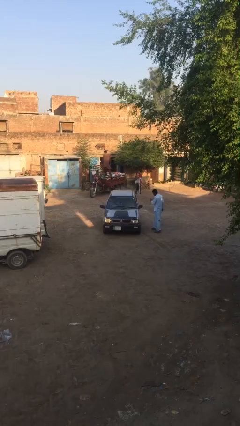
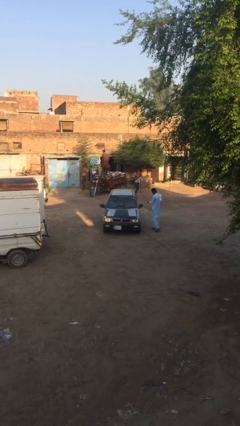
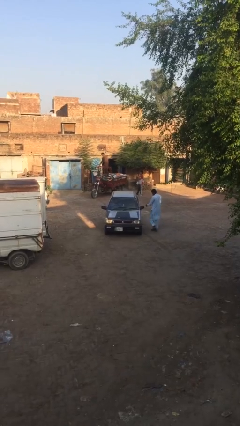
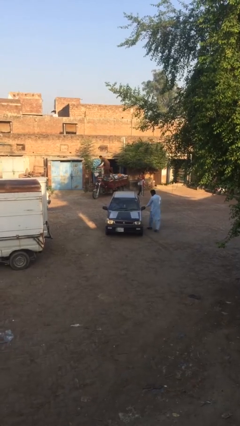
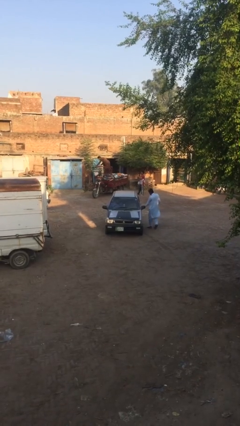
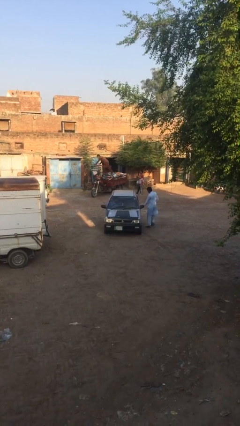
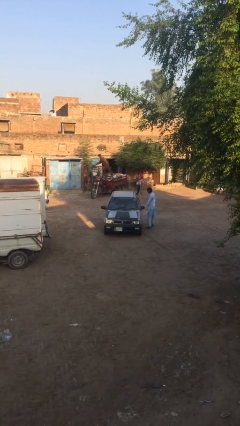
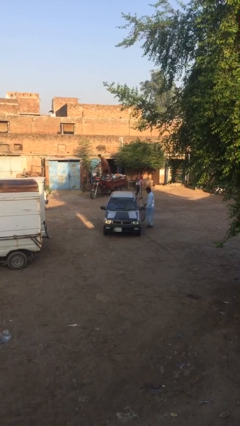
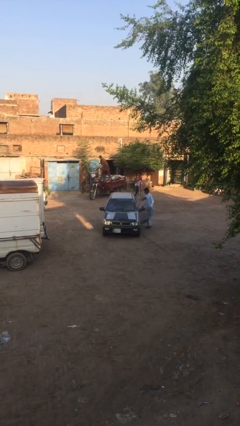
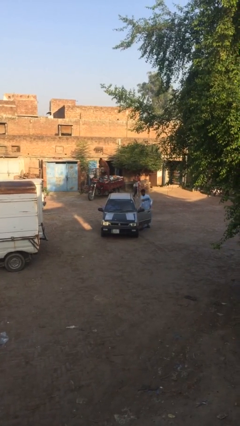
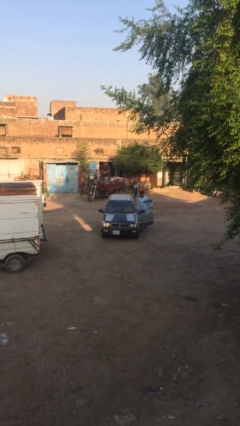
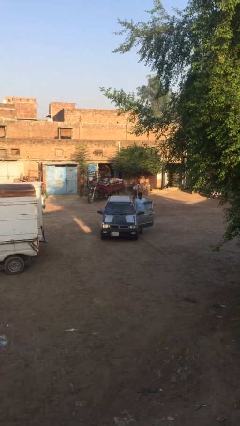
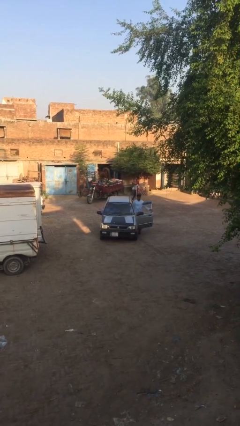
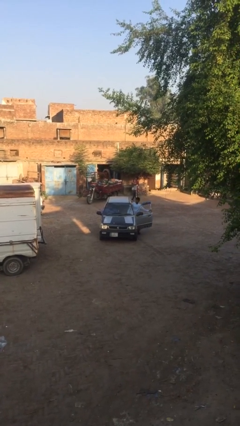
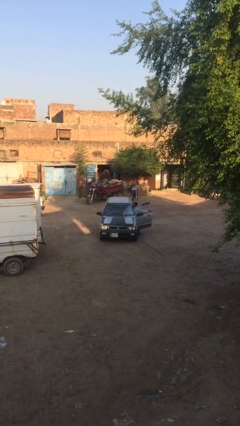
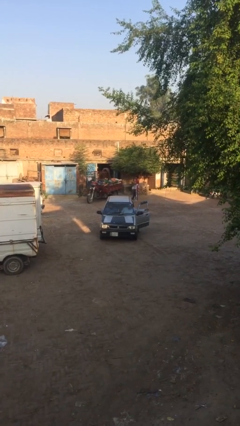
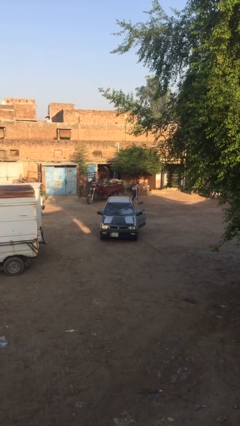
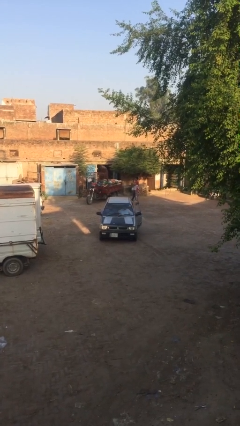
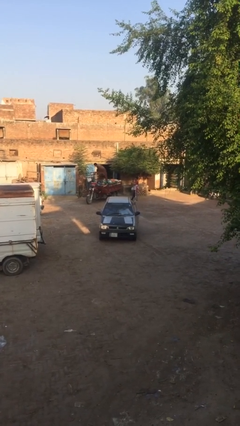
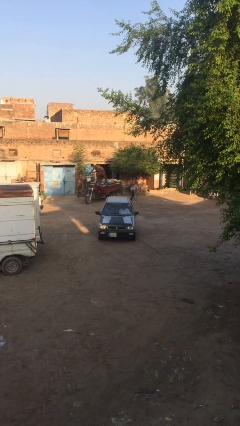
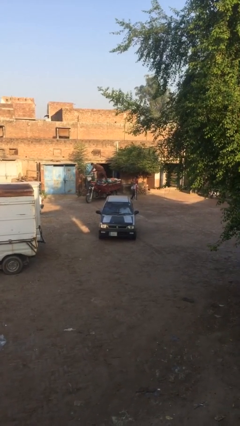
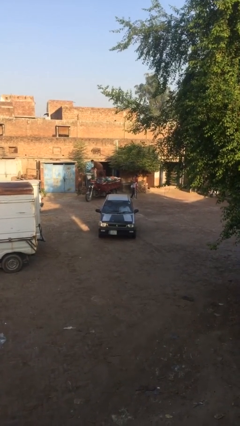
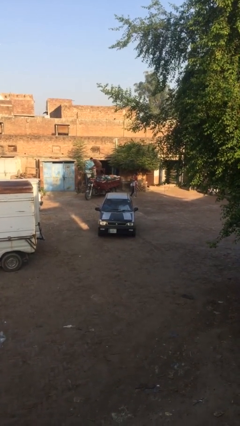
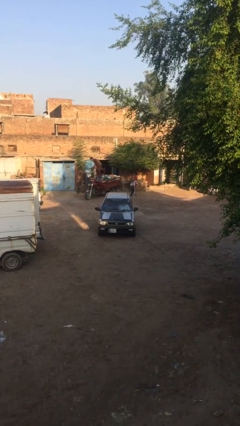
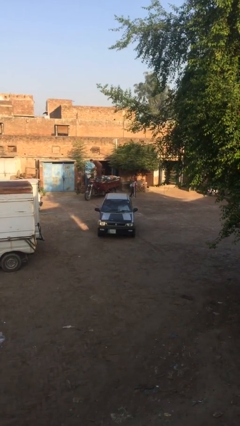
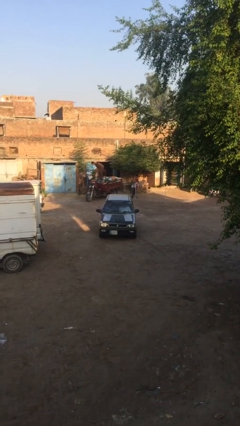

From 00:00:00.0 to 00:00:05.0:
car picks up person

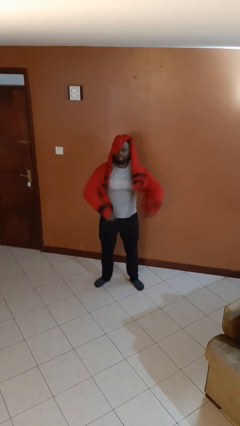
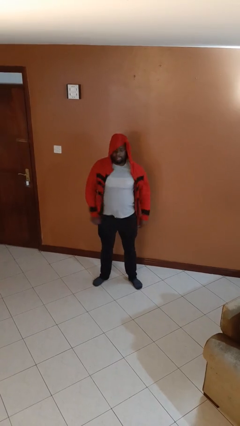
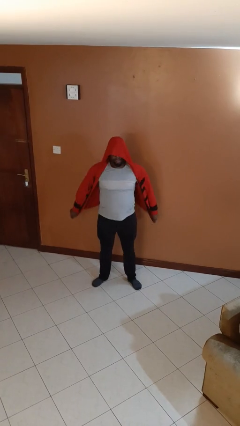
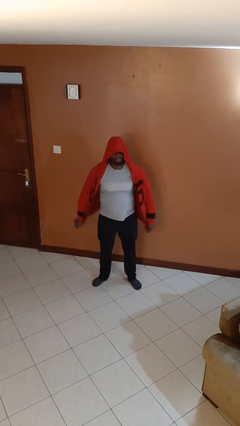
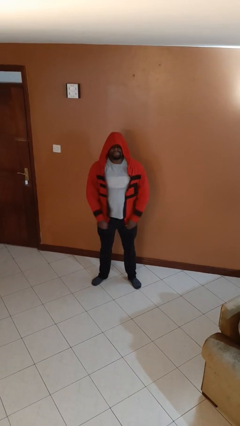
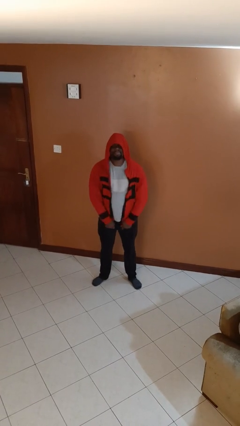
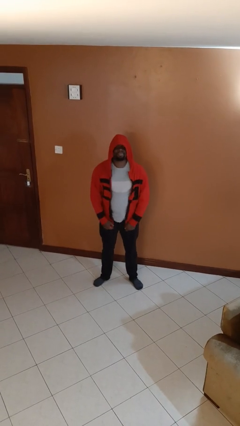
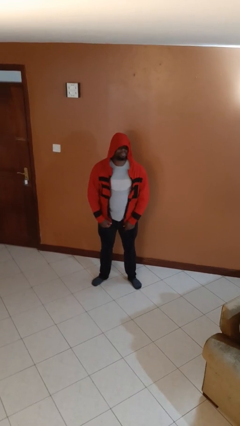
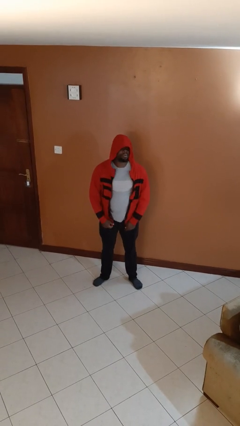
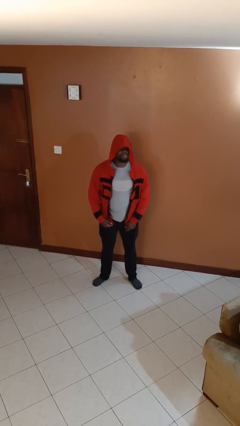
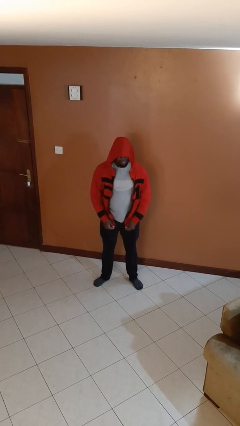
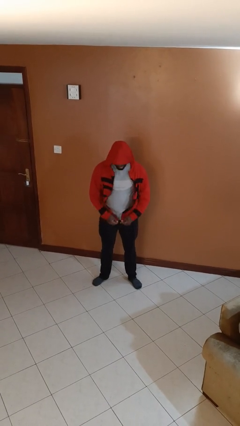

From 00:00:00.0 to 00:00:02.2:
person puts on jacket

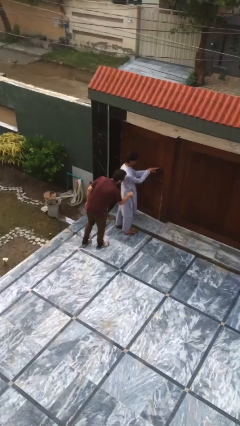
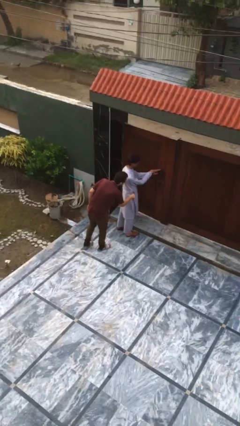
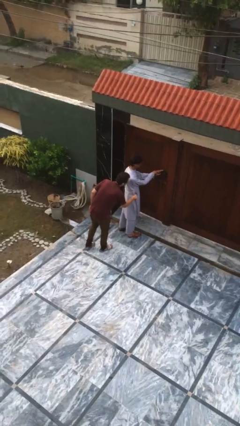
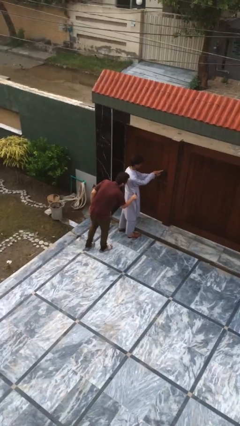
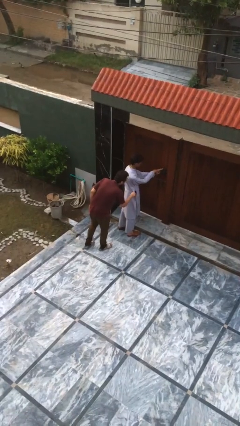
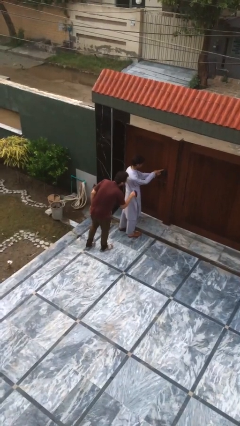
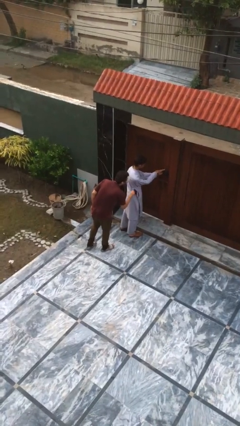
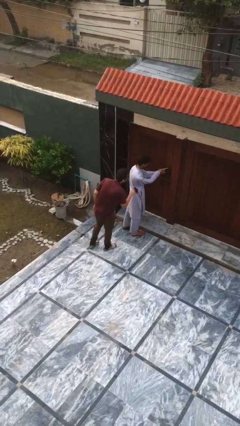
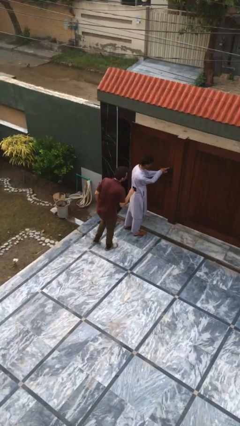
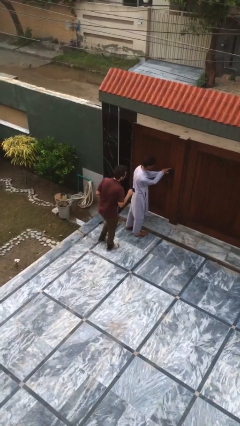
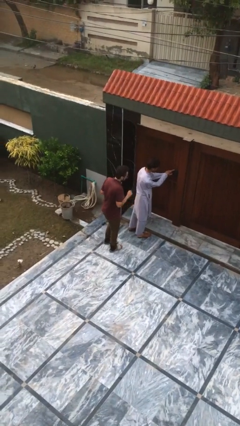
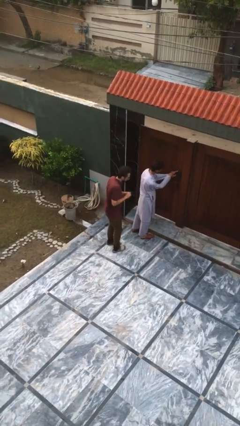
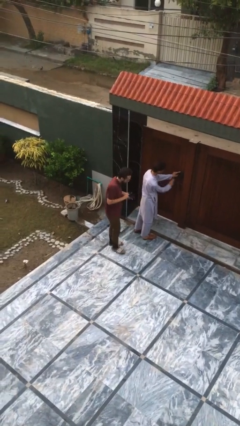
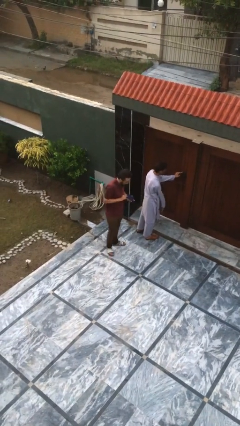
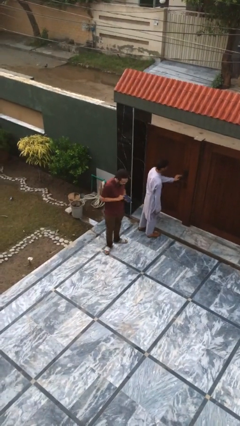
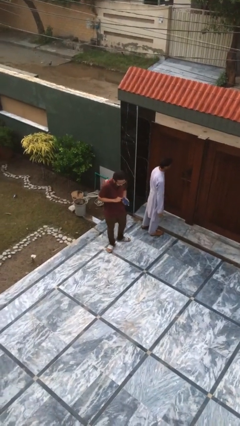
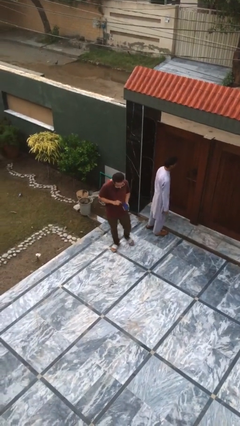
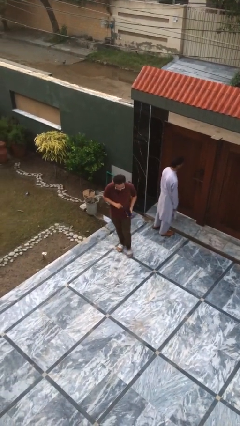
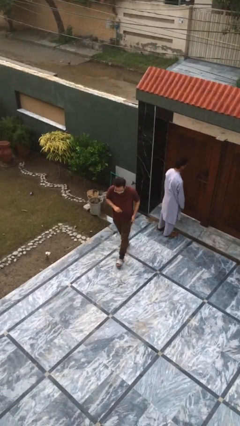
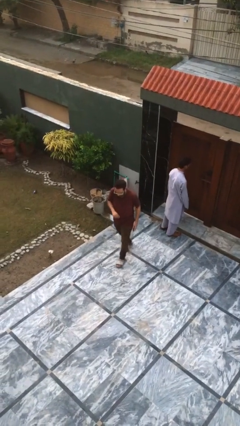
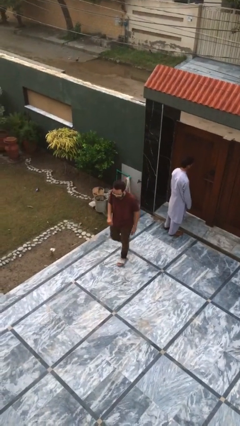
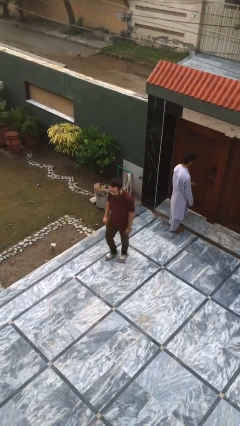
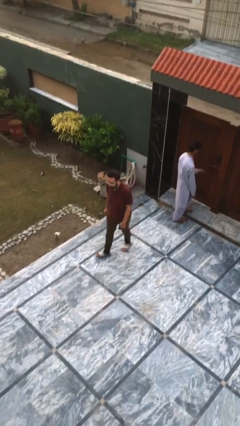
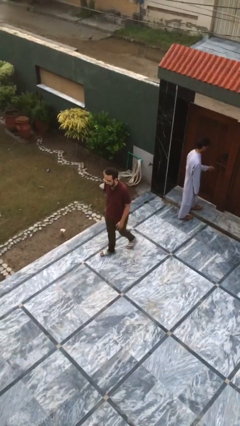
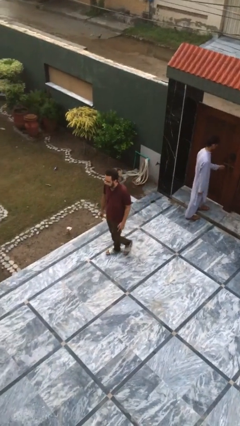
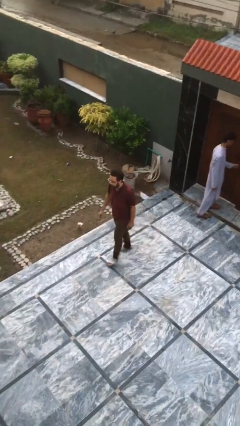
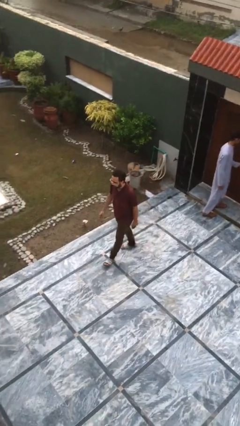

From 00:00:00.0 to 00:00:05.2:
person steals object from person

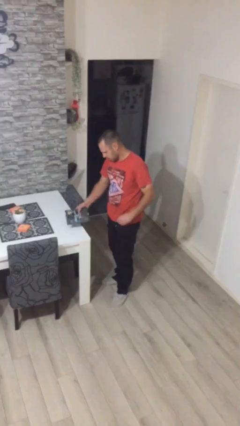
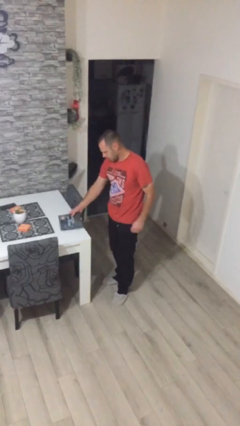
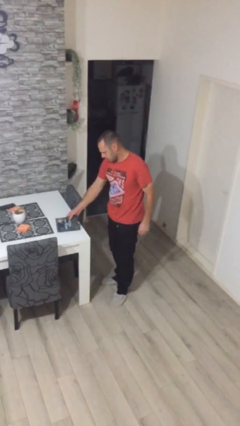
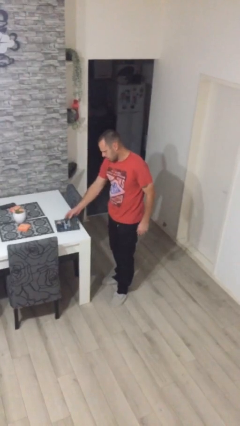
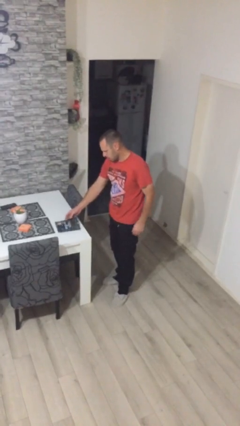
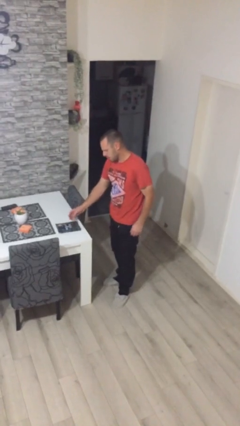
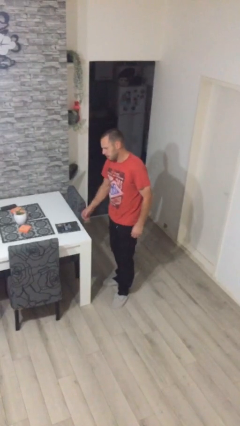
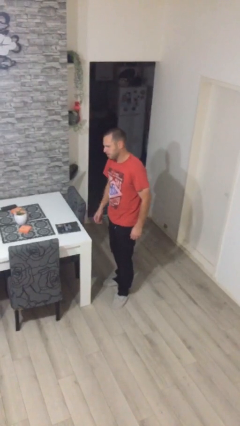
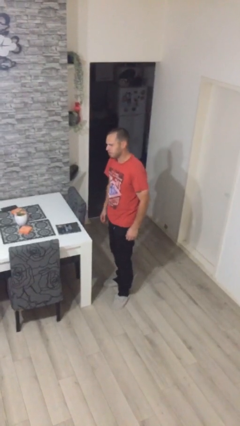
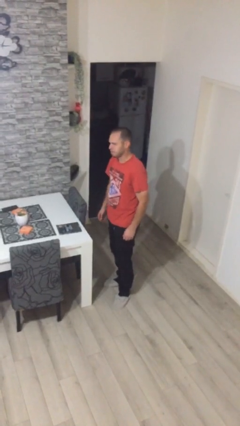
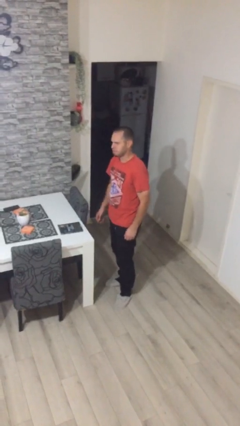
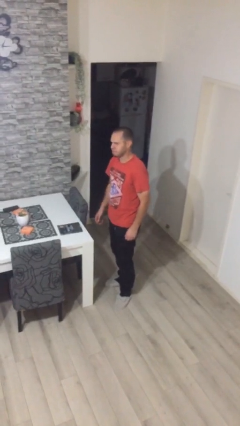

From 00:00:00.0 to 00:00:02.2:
person puts down object on table

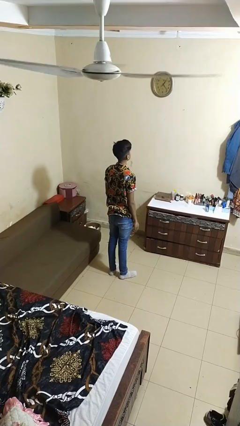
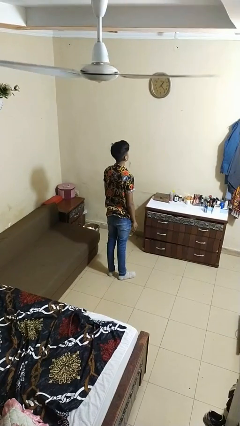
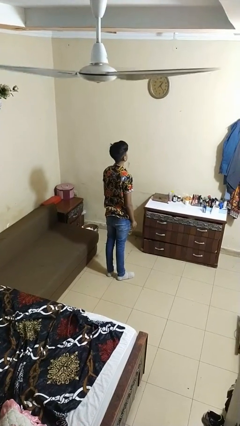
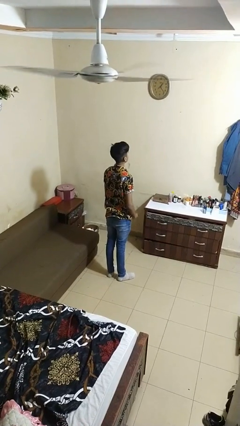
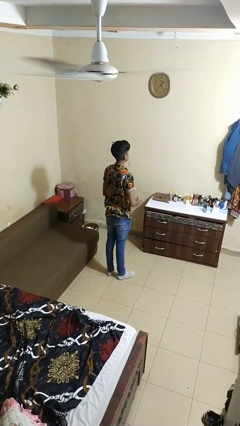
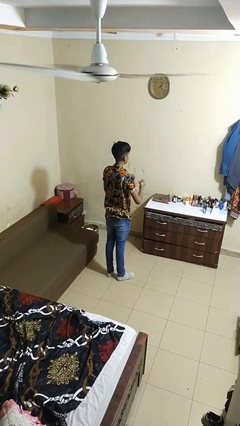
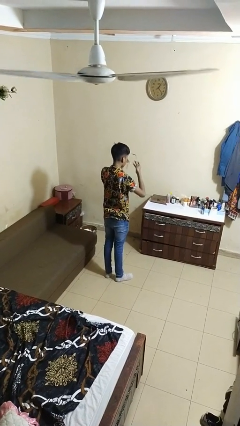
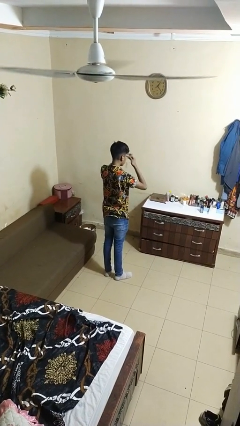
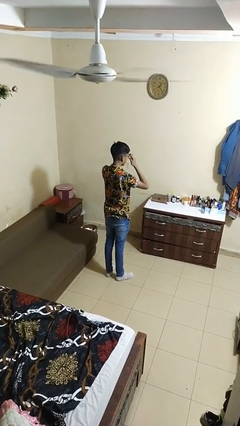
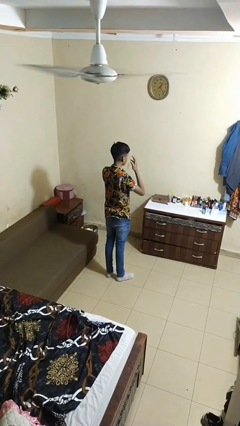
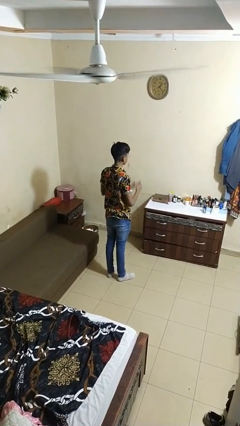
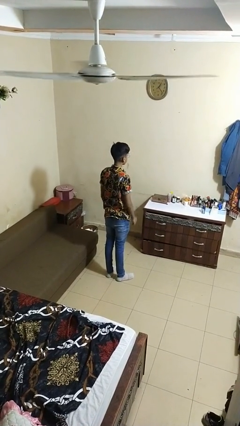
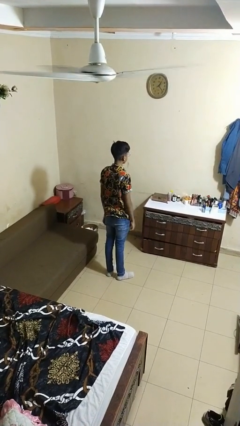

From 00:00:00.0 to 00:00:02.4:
person puts on glasses

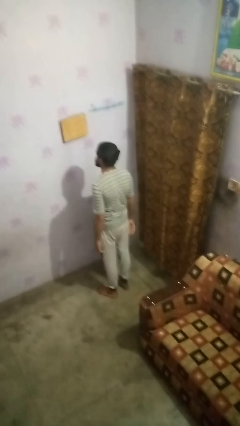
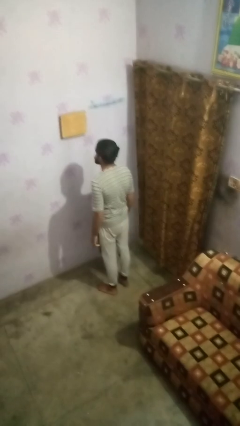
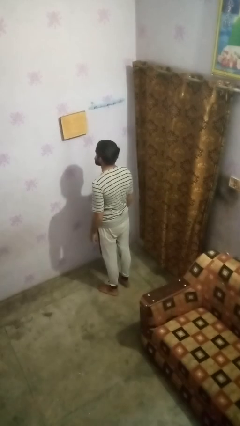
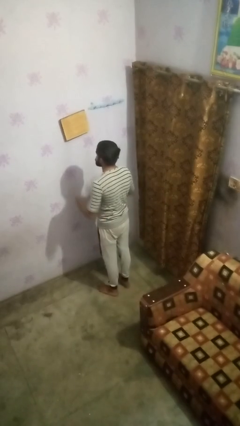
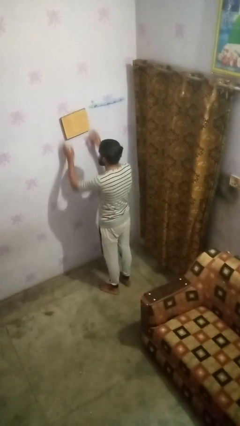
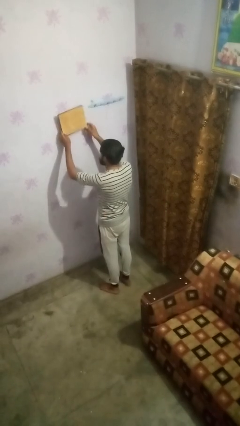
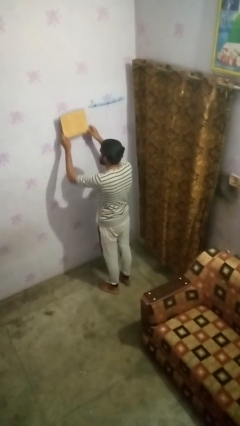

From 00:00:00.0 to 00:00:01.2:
person takes down picture frame
